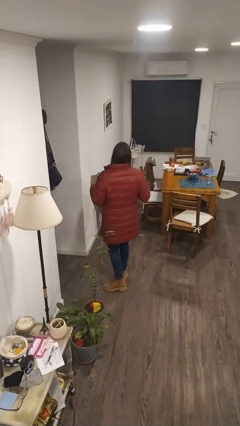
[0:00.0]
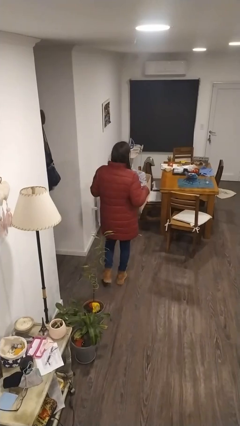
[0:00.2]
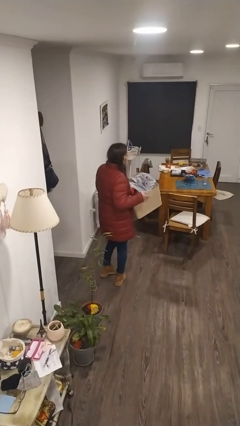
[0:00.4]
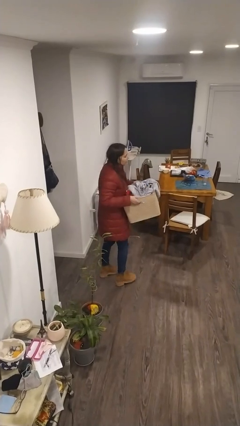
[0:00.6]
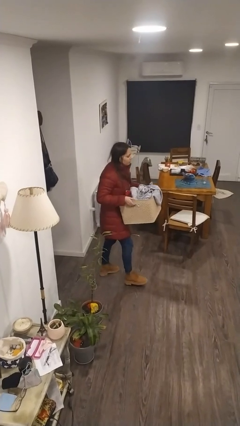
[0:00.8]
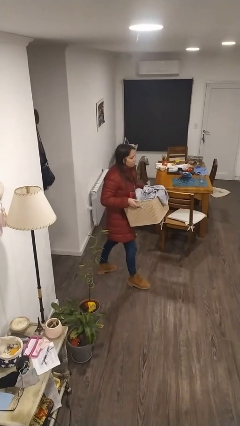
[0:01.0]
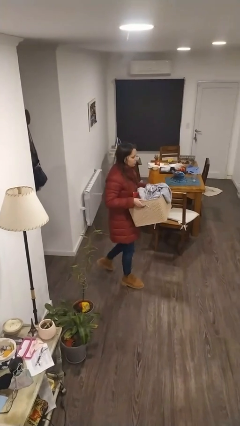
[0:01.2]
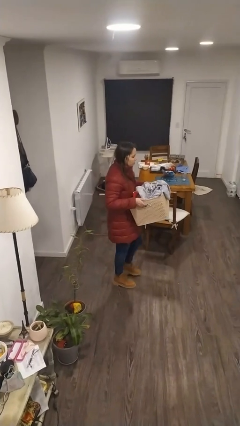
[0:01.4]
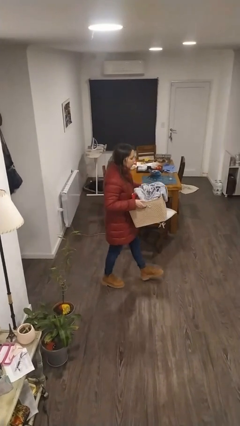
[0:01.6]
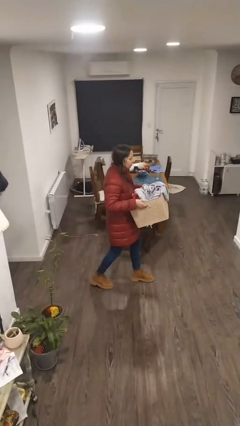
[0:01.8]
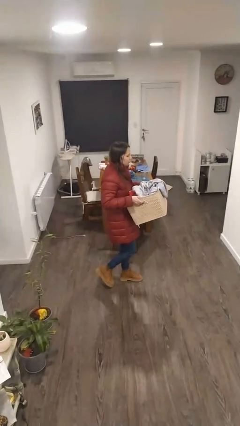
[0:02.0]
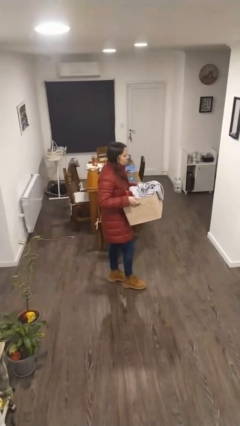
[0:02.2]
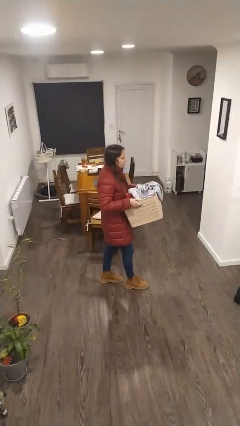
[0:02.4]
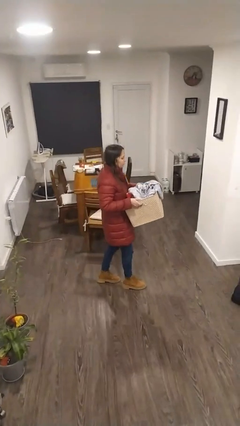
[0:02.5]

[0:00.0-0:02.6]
person carries laundry basket

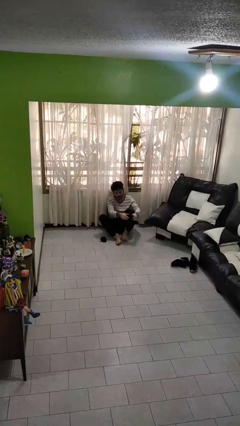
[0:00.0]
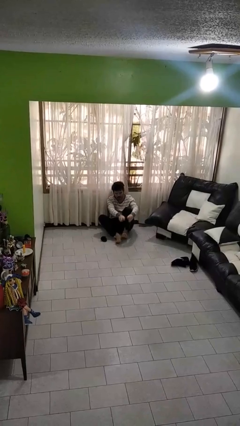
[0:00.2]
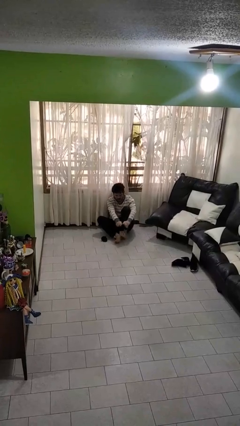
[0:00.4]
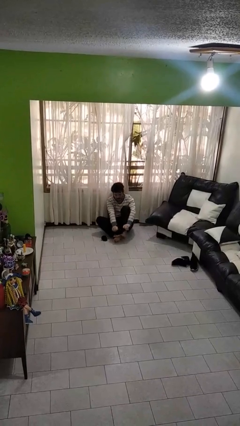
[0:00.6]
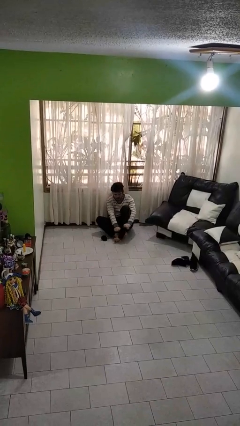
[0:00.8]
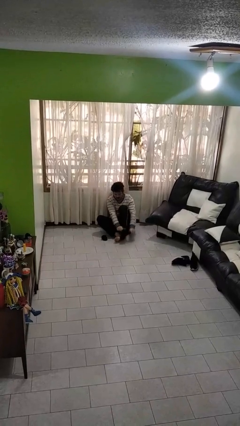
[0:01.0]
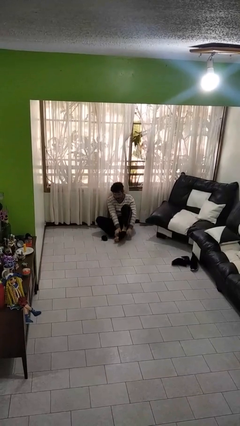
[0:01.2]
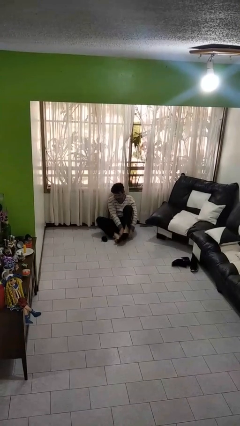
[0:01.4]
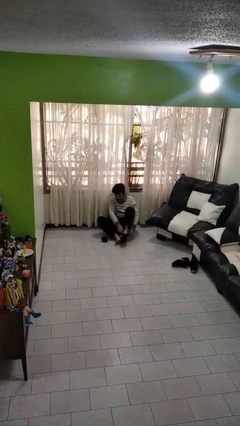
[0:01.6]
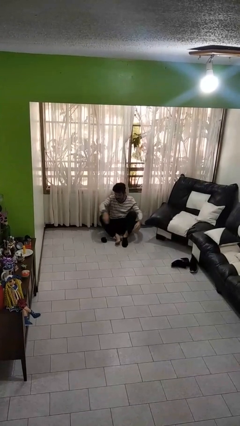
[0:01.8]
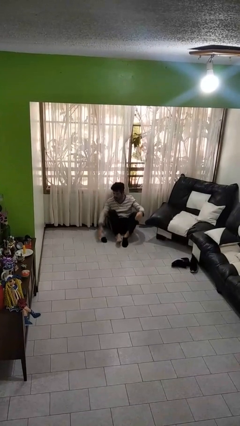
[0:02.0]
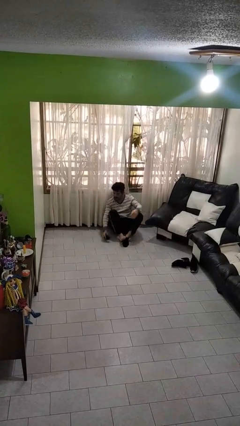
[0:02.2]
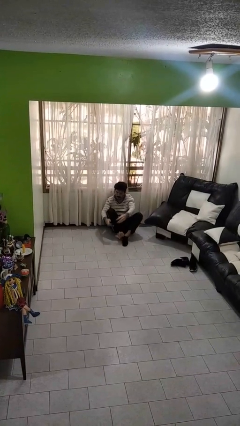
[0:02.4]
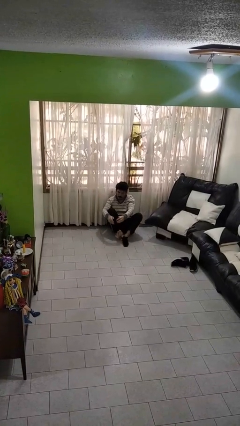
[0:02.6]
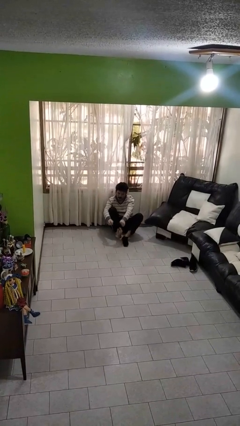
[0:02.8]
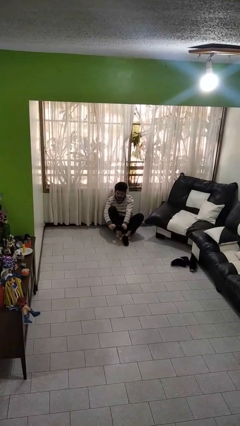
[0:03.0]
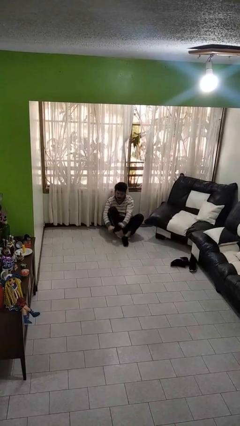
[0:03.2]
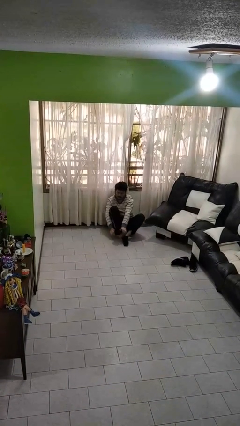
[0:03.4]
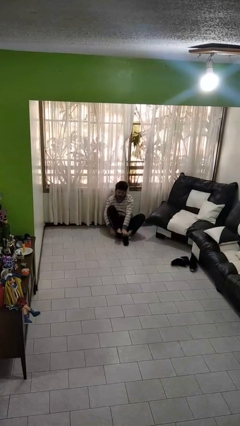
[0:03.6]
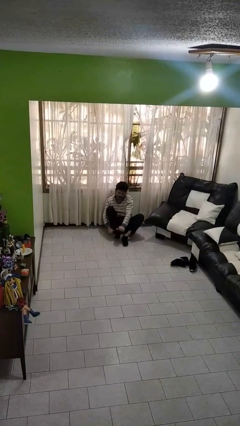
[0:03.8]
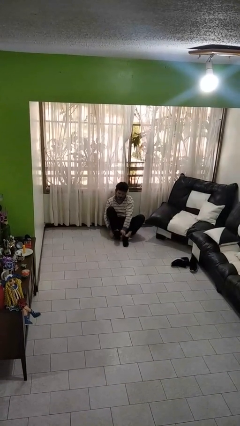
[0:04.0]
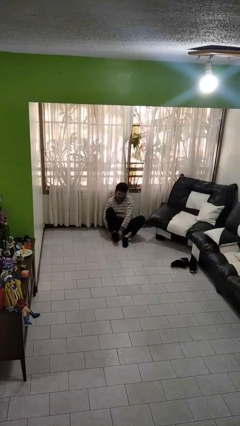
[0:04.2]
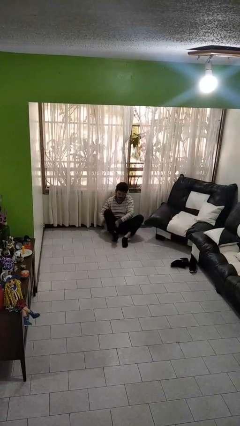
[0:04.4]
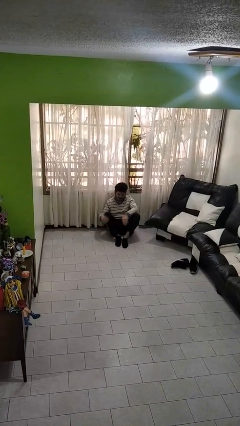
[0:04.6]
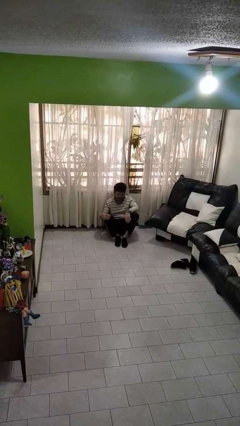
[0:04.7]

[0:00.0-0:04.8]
person puts on socks

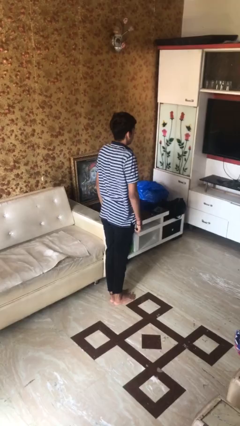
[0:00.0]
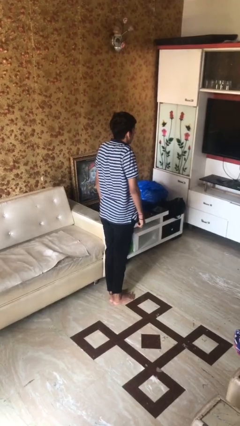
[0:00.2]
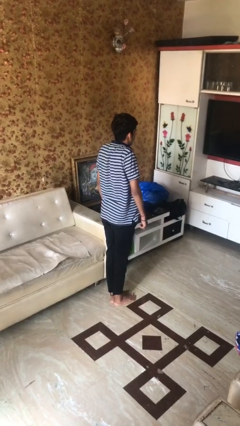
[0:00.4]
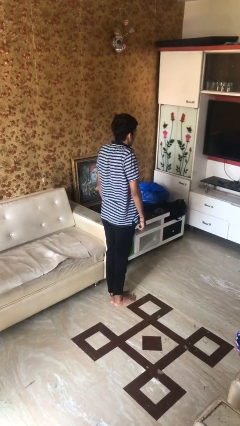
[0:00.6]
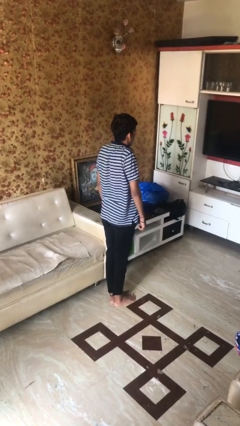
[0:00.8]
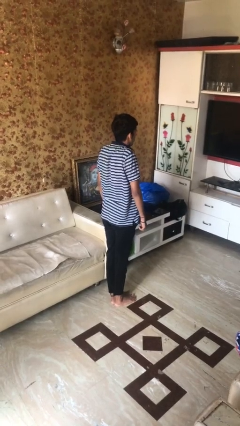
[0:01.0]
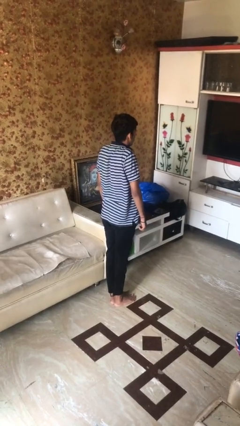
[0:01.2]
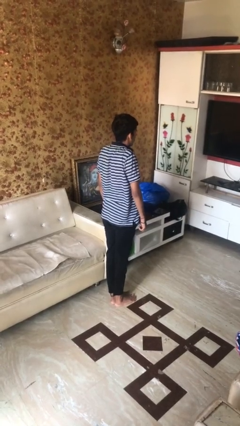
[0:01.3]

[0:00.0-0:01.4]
person shrugs

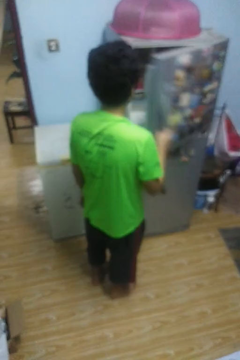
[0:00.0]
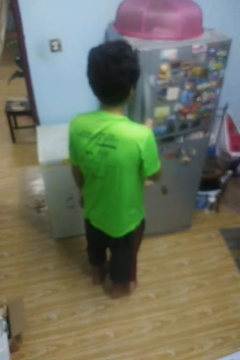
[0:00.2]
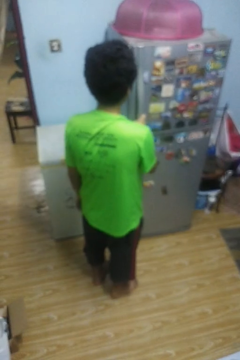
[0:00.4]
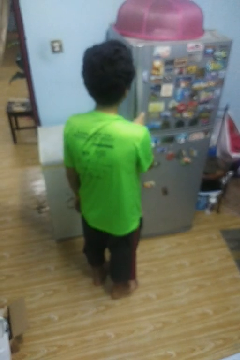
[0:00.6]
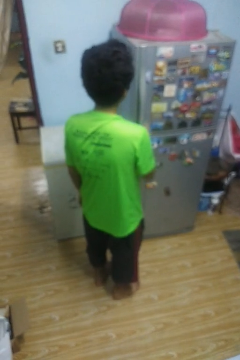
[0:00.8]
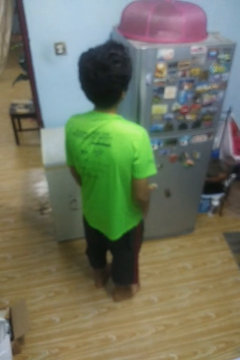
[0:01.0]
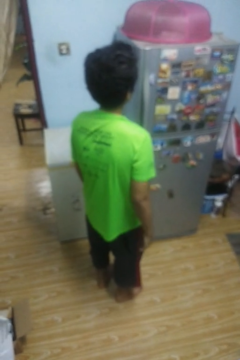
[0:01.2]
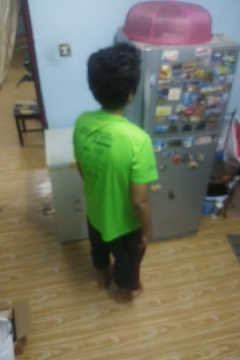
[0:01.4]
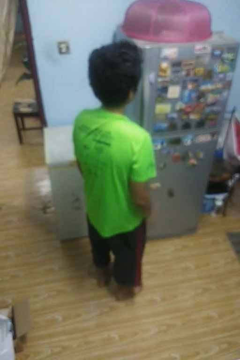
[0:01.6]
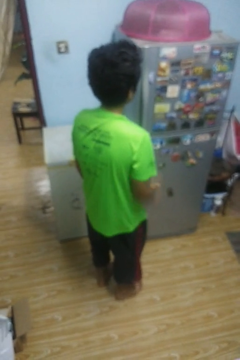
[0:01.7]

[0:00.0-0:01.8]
person closes refrigerator

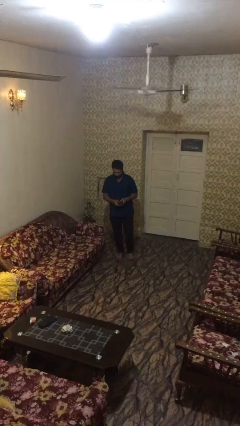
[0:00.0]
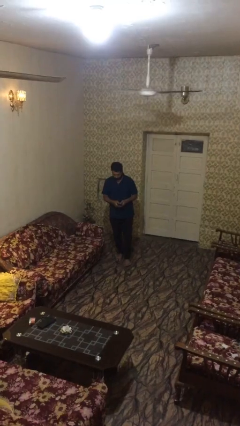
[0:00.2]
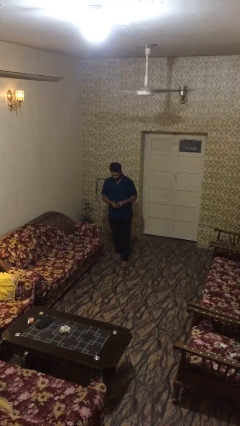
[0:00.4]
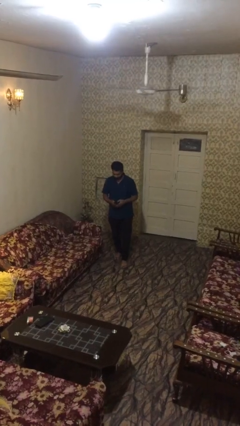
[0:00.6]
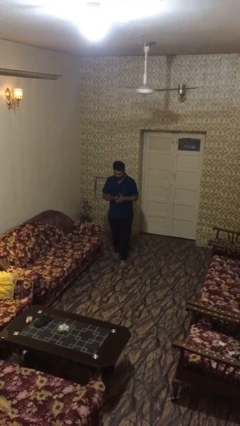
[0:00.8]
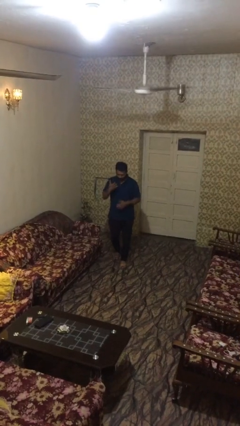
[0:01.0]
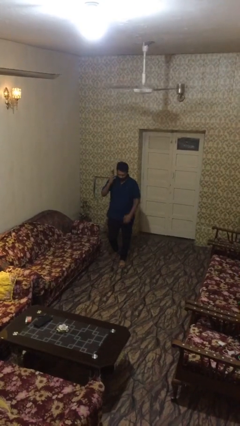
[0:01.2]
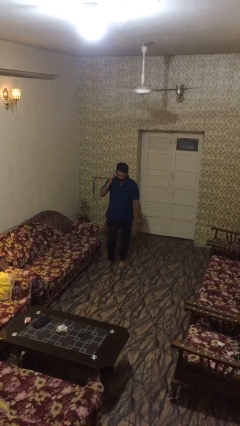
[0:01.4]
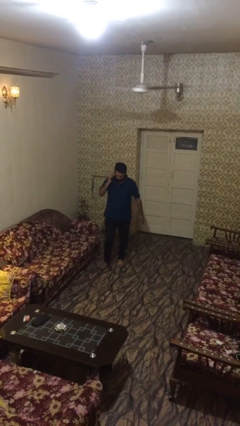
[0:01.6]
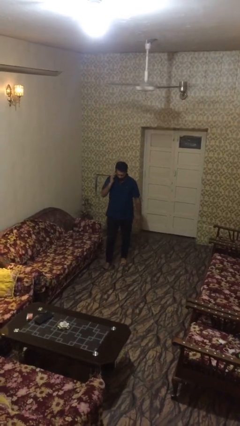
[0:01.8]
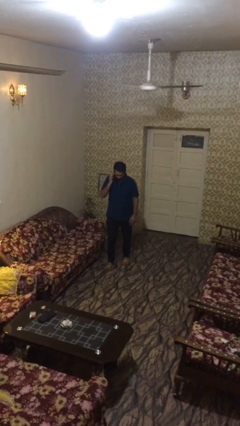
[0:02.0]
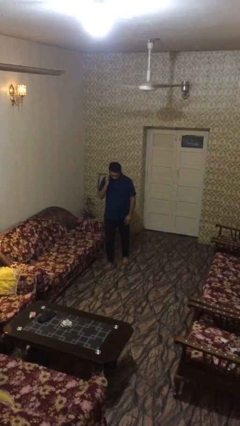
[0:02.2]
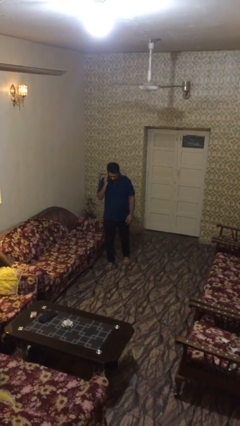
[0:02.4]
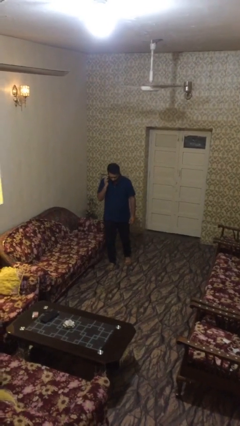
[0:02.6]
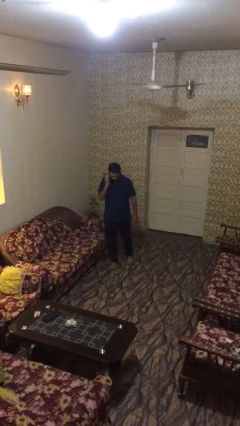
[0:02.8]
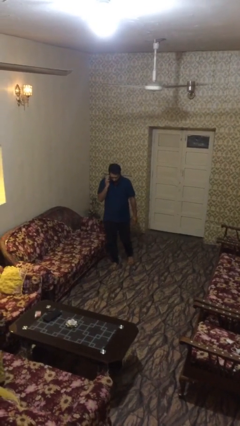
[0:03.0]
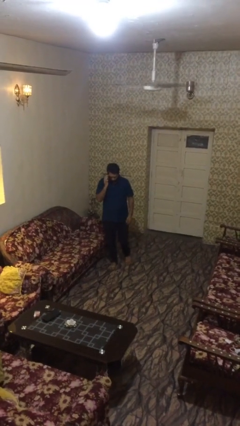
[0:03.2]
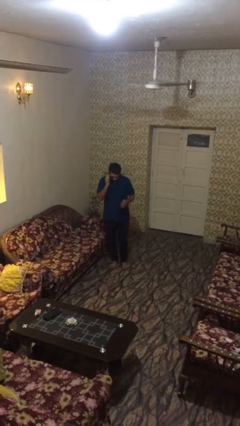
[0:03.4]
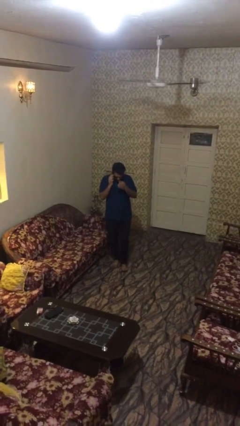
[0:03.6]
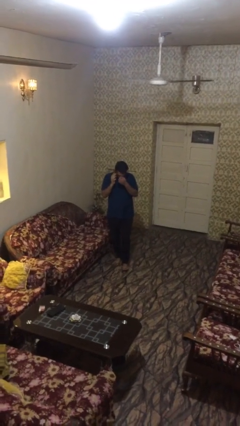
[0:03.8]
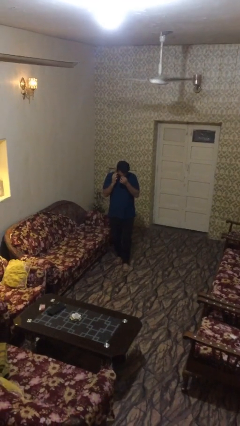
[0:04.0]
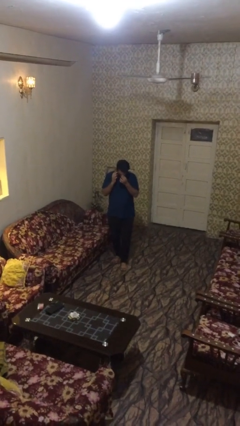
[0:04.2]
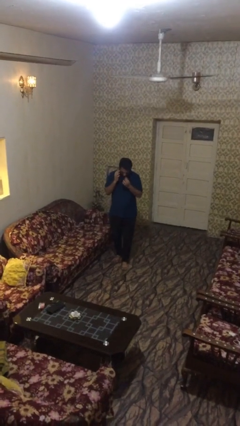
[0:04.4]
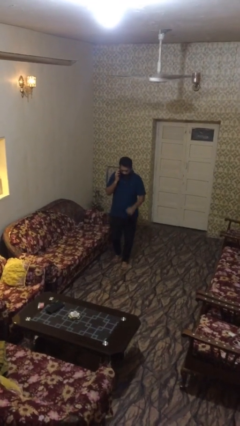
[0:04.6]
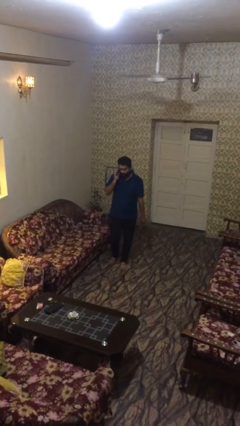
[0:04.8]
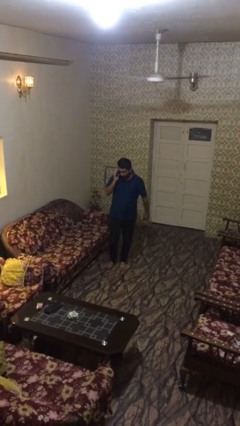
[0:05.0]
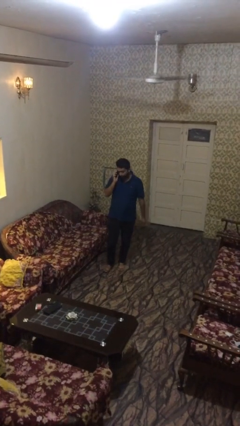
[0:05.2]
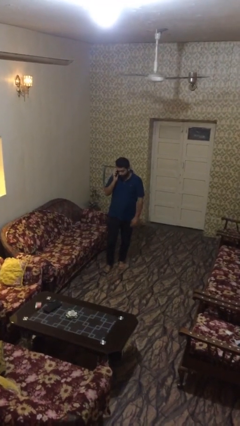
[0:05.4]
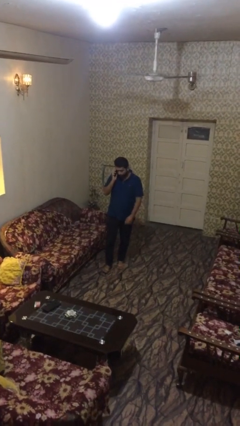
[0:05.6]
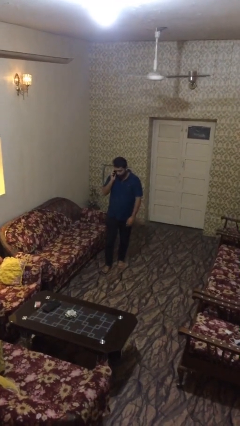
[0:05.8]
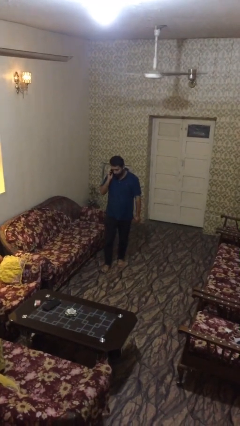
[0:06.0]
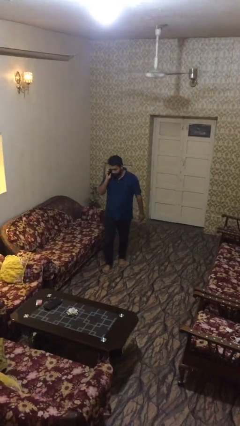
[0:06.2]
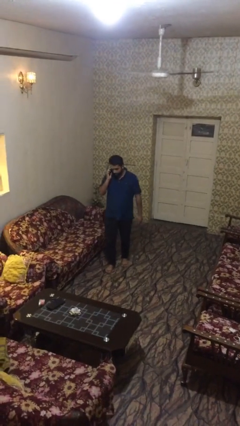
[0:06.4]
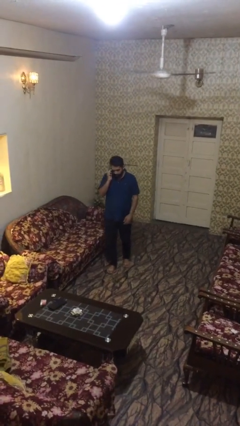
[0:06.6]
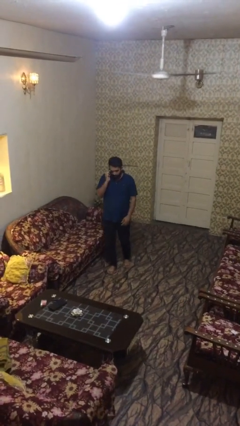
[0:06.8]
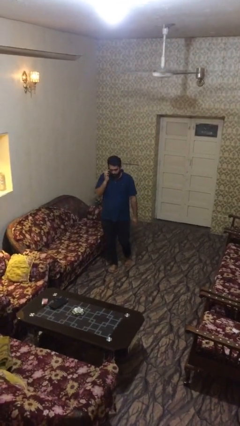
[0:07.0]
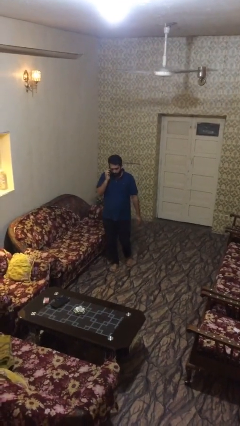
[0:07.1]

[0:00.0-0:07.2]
person talks on phone
